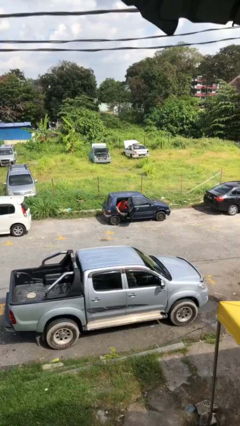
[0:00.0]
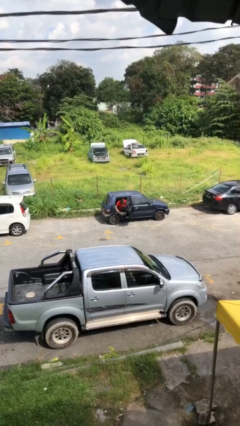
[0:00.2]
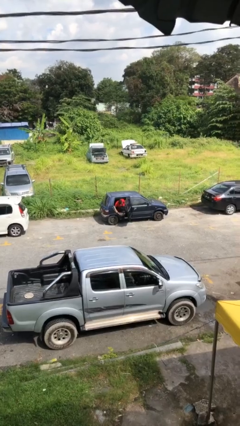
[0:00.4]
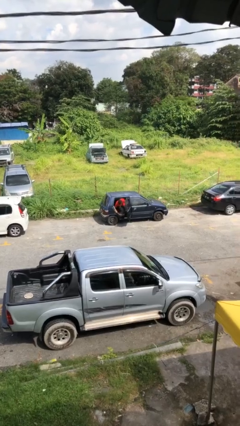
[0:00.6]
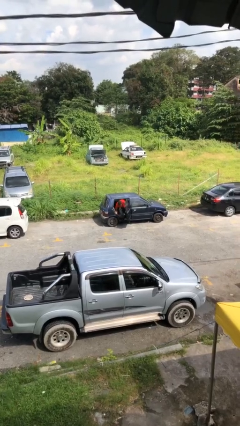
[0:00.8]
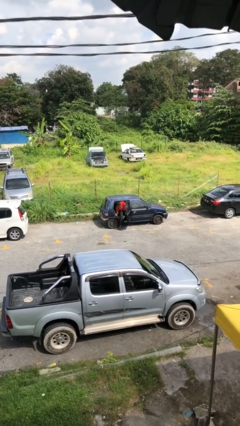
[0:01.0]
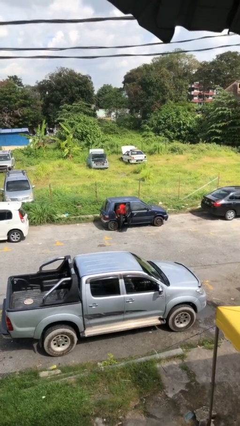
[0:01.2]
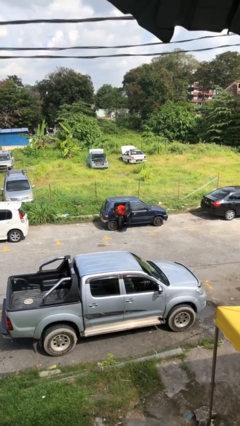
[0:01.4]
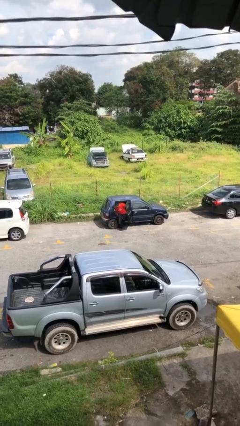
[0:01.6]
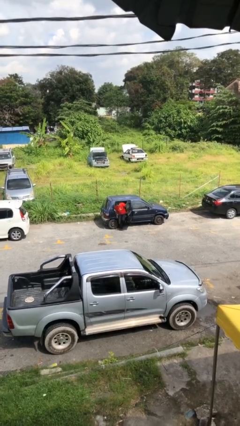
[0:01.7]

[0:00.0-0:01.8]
person opens car door

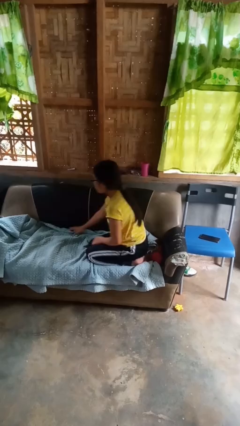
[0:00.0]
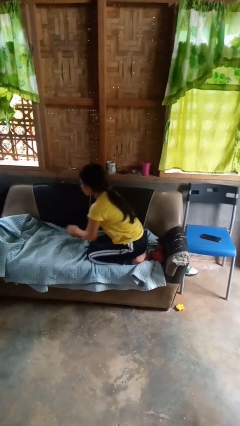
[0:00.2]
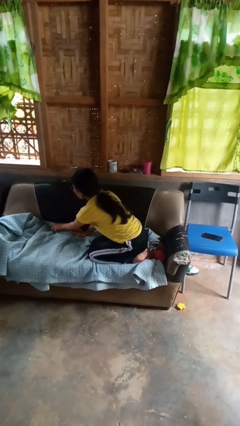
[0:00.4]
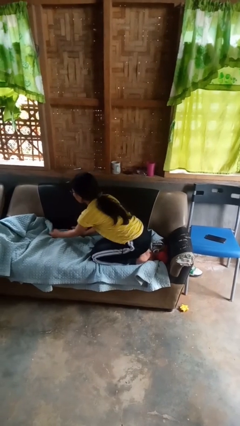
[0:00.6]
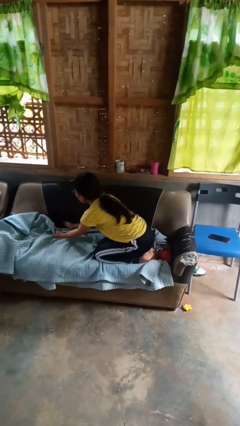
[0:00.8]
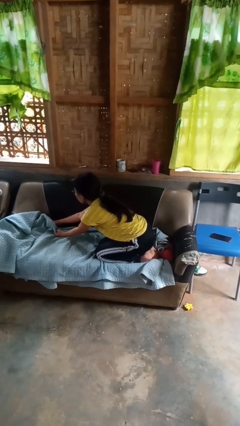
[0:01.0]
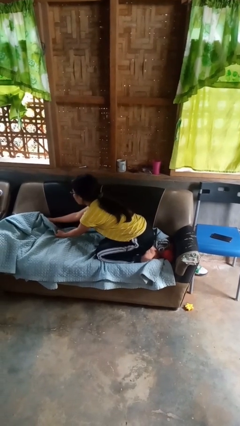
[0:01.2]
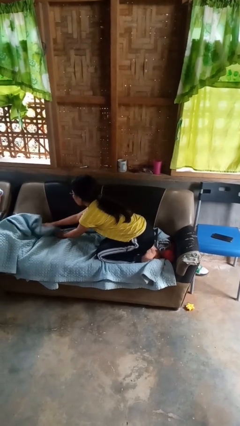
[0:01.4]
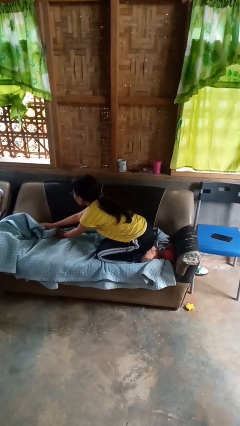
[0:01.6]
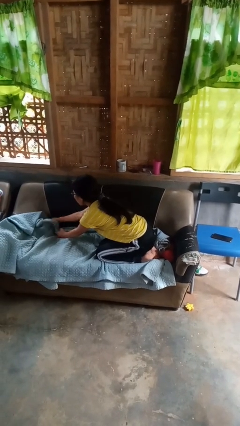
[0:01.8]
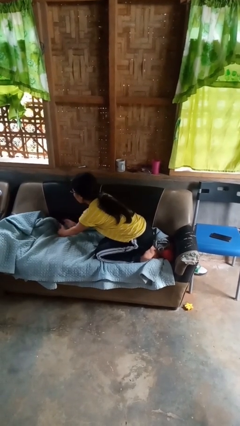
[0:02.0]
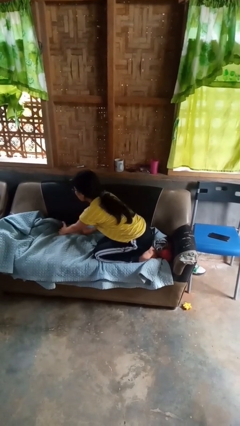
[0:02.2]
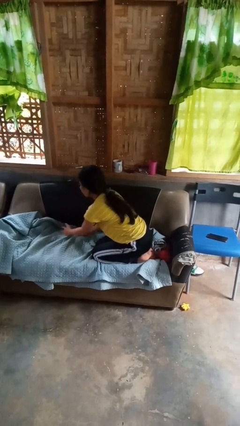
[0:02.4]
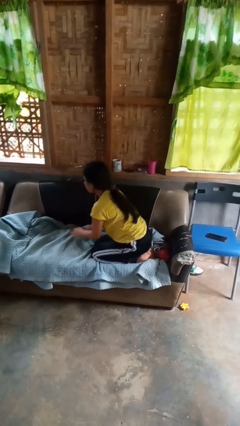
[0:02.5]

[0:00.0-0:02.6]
person searches in couch

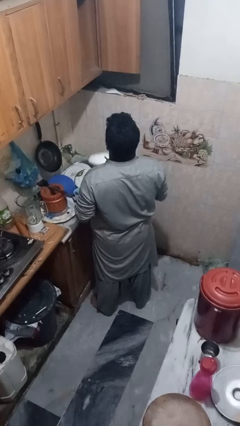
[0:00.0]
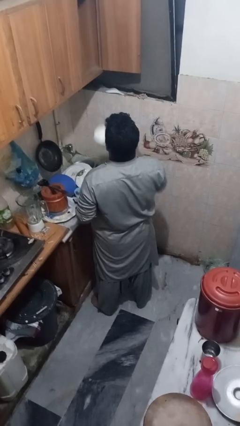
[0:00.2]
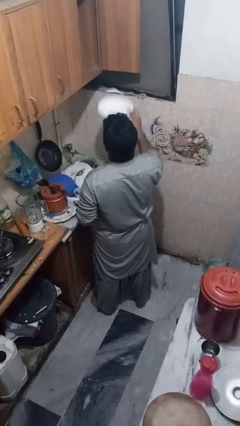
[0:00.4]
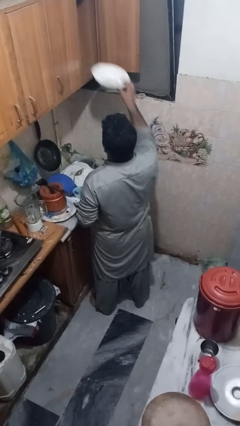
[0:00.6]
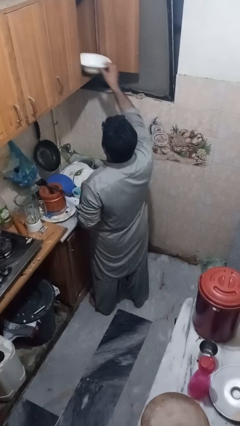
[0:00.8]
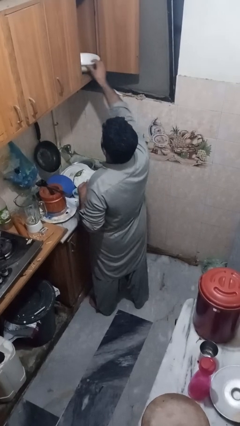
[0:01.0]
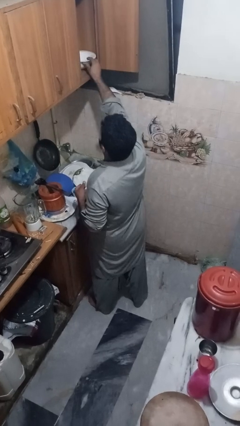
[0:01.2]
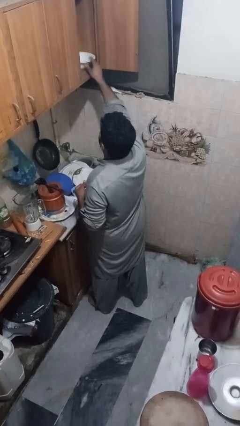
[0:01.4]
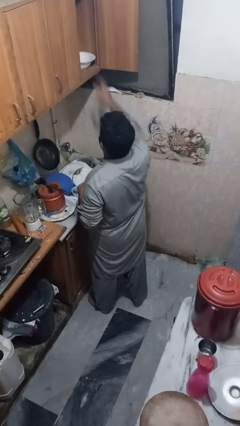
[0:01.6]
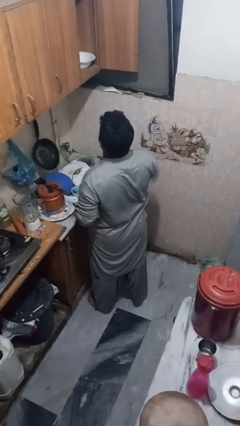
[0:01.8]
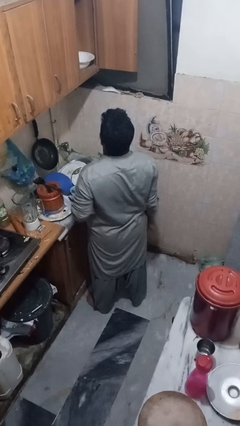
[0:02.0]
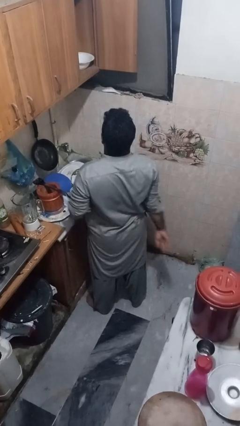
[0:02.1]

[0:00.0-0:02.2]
person puts object in cabinet

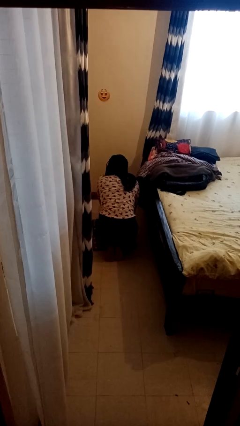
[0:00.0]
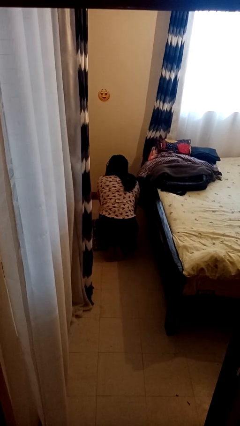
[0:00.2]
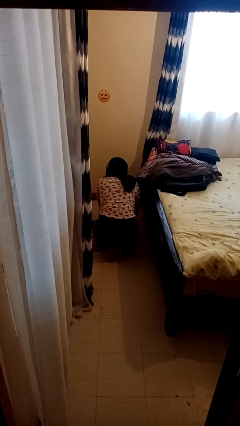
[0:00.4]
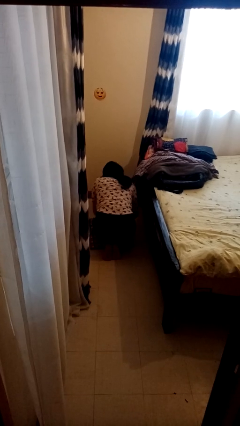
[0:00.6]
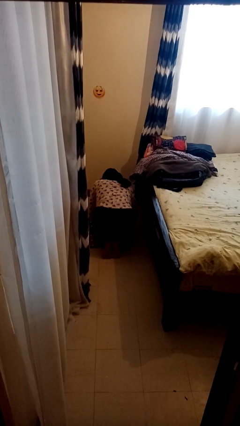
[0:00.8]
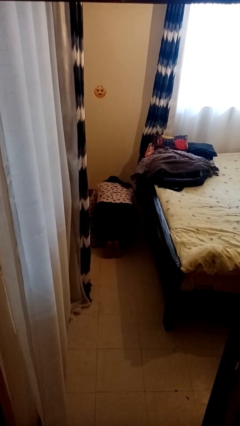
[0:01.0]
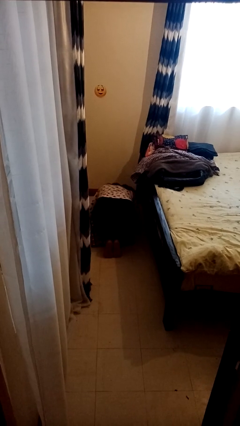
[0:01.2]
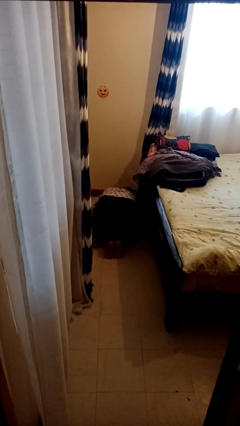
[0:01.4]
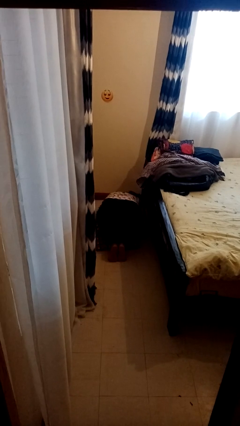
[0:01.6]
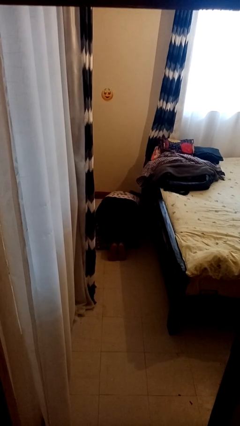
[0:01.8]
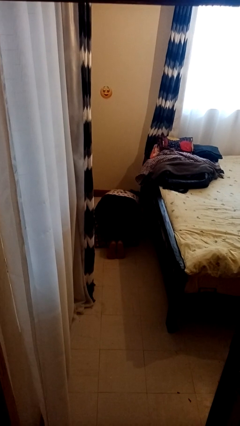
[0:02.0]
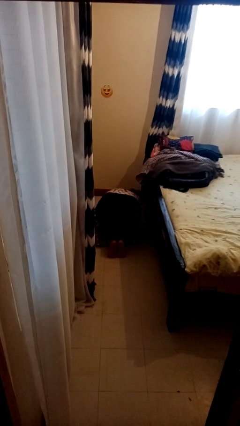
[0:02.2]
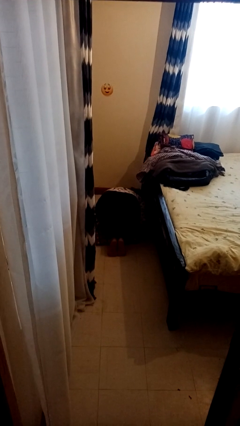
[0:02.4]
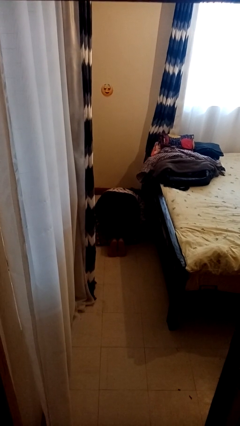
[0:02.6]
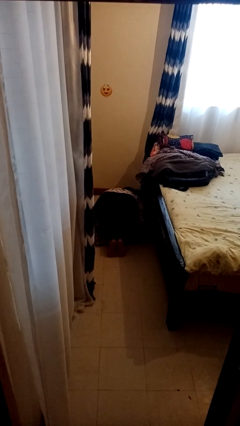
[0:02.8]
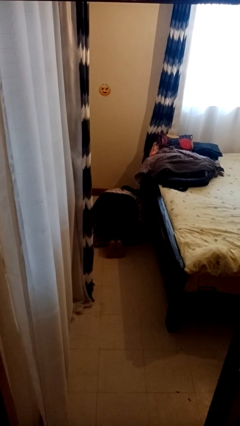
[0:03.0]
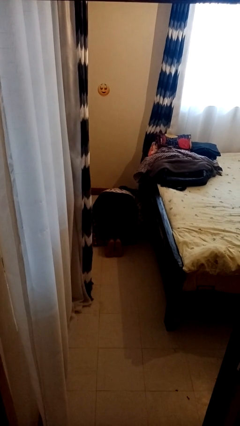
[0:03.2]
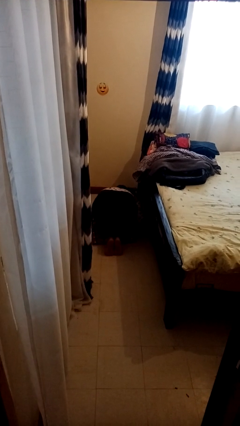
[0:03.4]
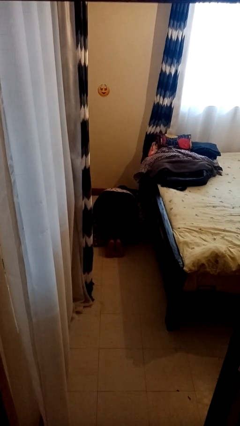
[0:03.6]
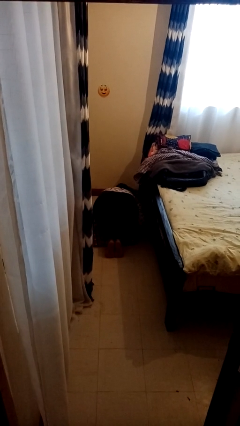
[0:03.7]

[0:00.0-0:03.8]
person searches under bed

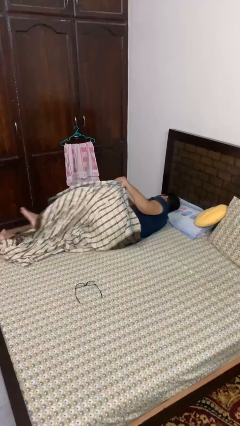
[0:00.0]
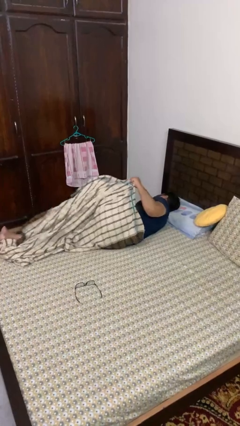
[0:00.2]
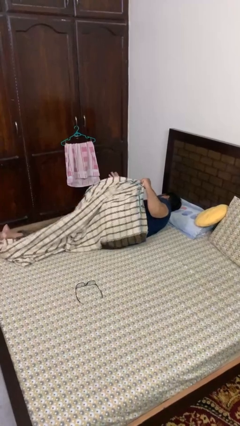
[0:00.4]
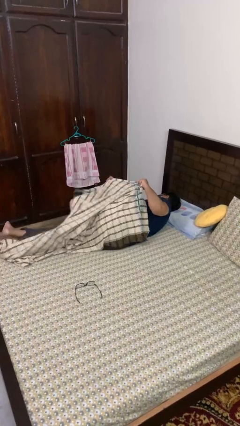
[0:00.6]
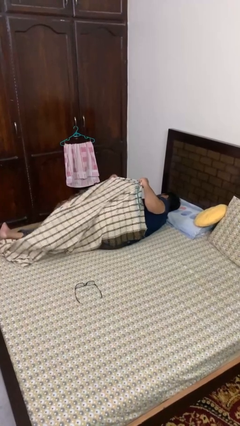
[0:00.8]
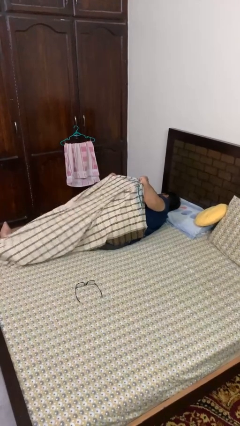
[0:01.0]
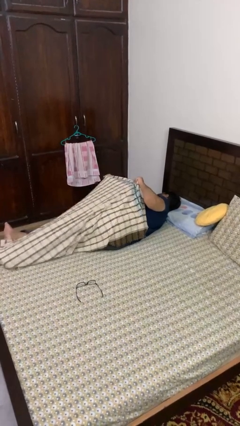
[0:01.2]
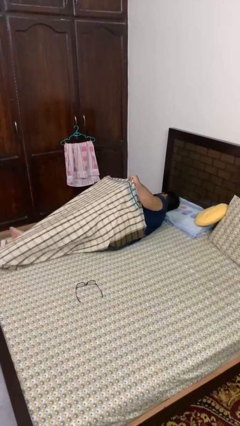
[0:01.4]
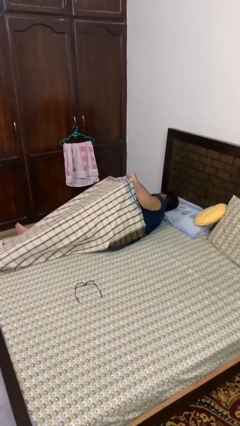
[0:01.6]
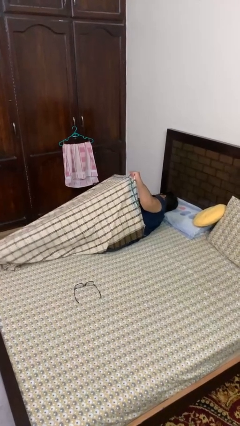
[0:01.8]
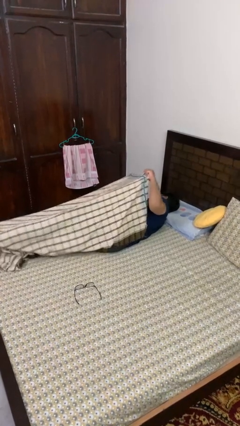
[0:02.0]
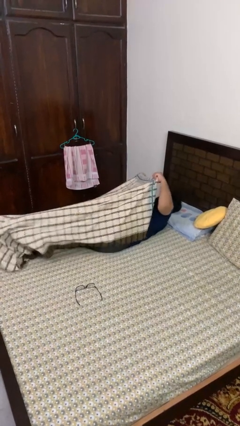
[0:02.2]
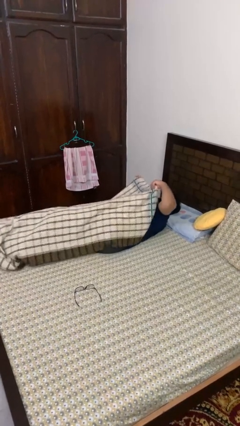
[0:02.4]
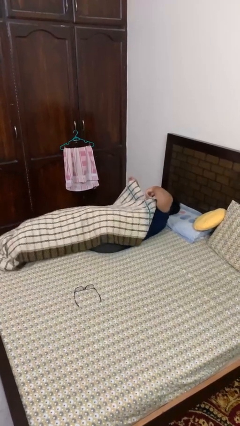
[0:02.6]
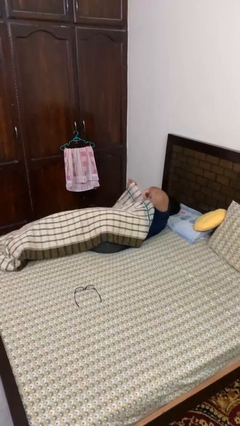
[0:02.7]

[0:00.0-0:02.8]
person covers with bedsheets

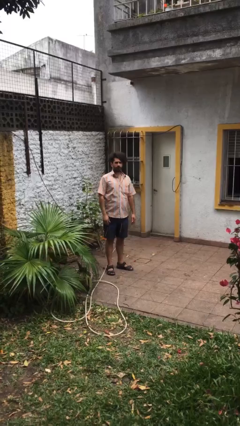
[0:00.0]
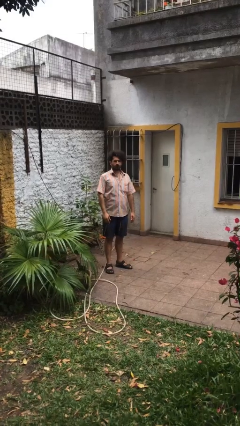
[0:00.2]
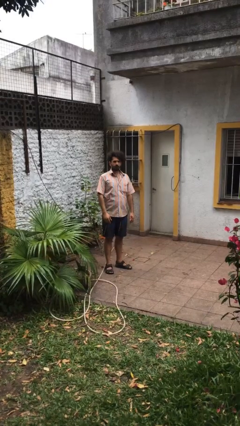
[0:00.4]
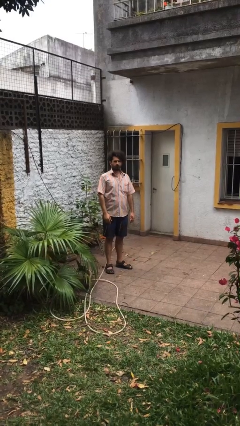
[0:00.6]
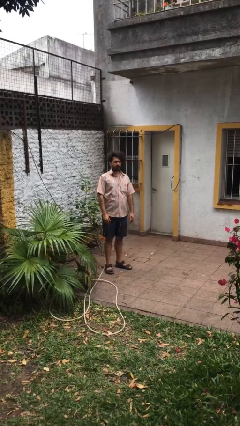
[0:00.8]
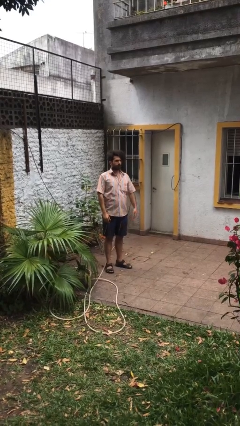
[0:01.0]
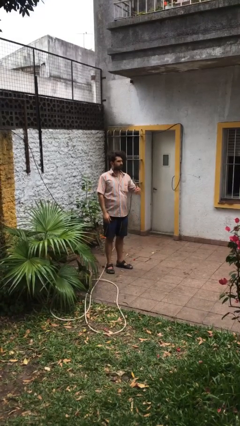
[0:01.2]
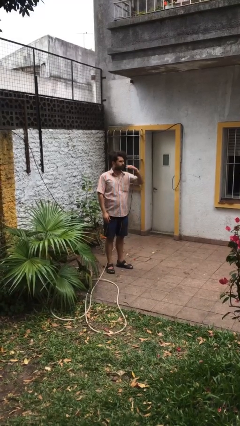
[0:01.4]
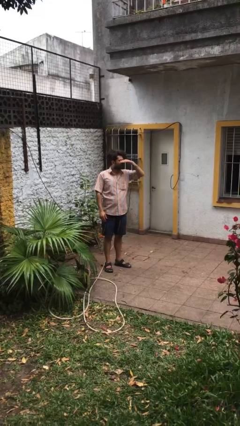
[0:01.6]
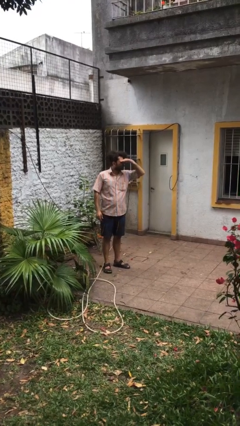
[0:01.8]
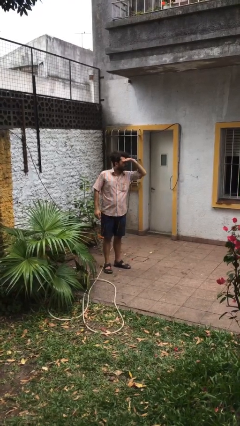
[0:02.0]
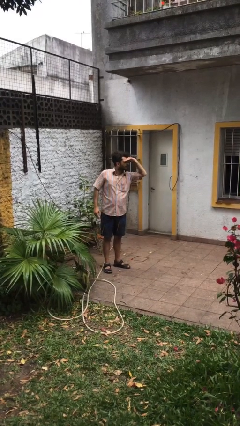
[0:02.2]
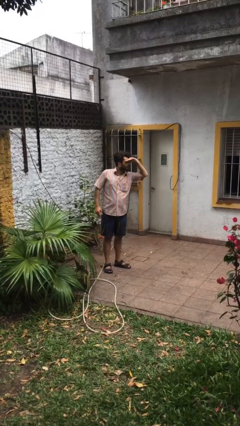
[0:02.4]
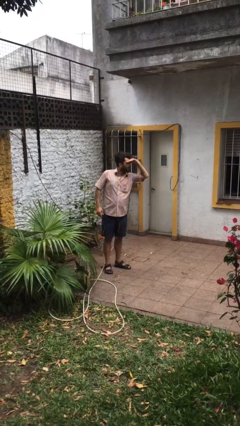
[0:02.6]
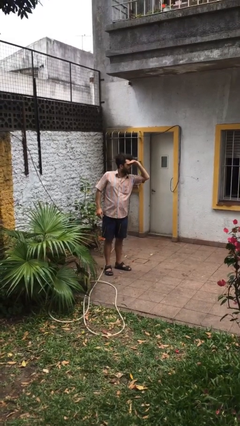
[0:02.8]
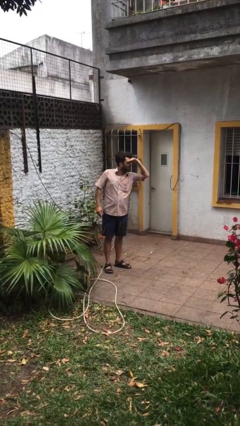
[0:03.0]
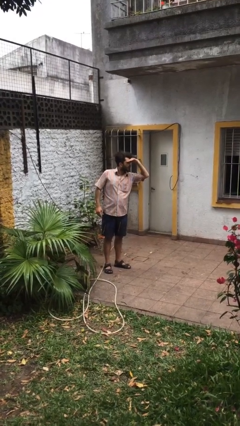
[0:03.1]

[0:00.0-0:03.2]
person shades eyes

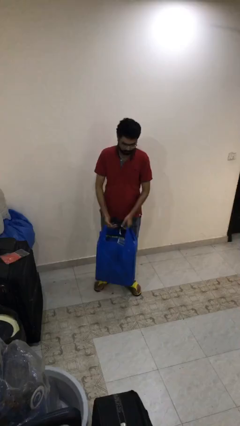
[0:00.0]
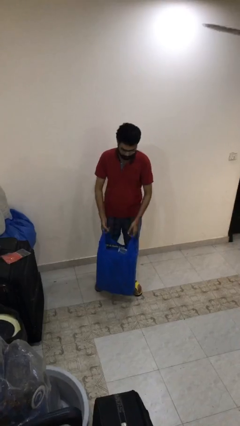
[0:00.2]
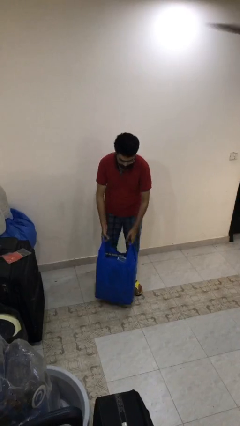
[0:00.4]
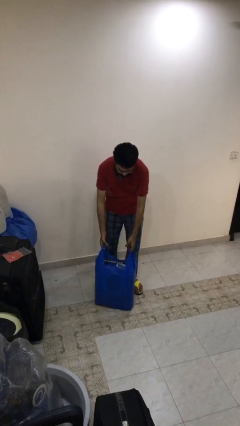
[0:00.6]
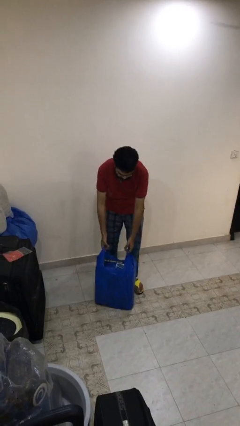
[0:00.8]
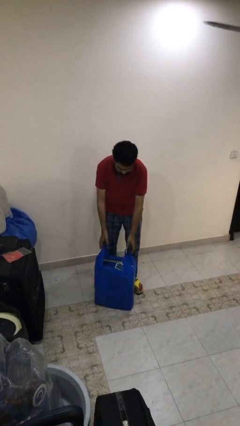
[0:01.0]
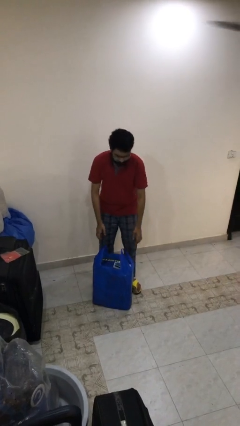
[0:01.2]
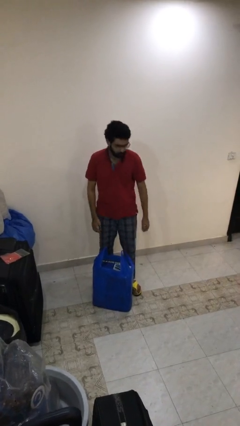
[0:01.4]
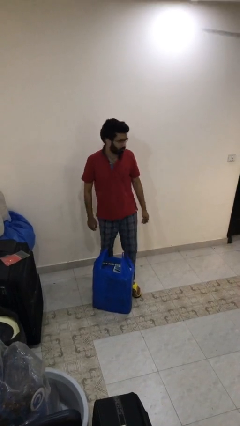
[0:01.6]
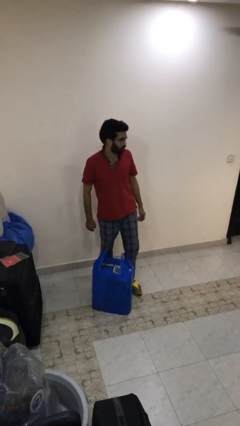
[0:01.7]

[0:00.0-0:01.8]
person puts down object on floor
